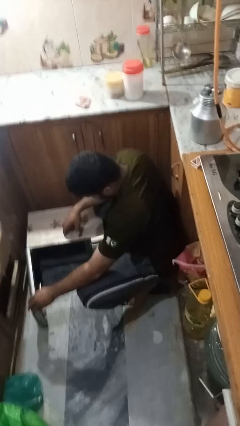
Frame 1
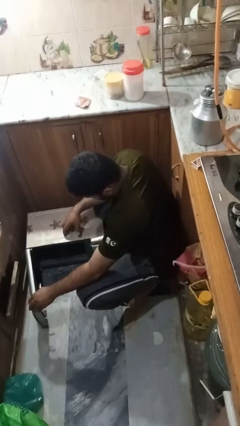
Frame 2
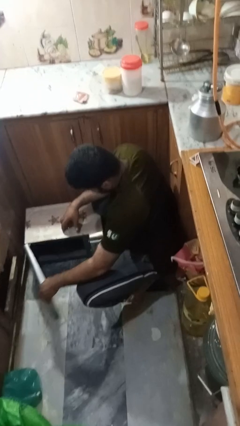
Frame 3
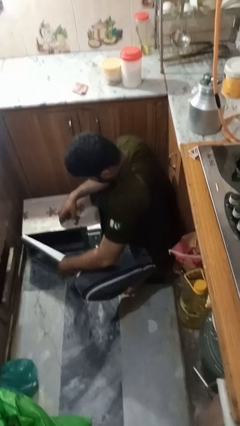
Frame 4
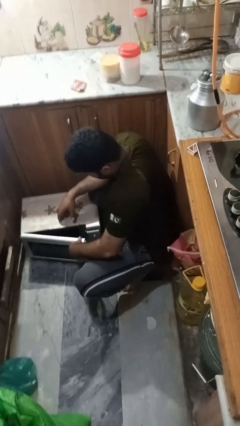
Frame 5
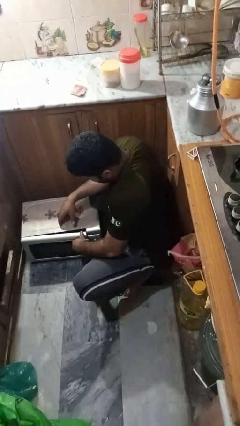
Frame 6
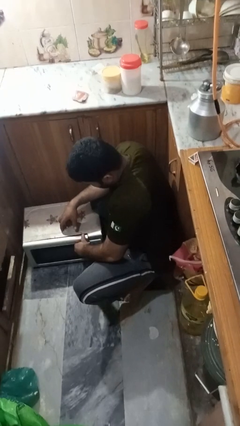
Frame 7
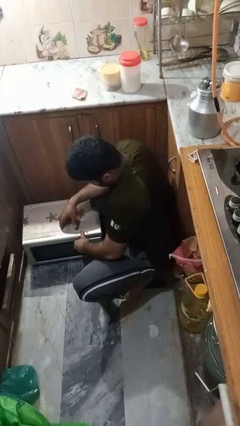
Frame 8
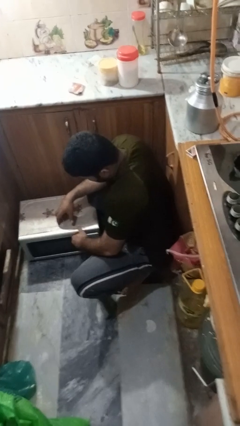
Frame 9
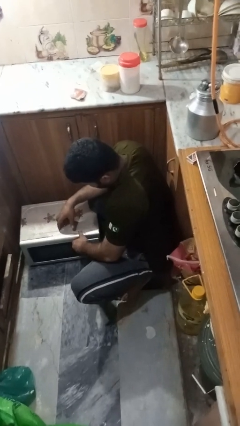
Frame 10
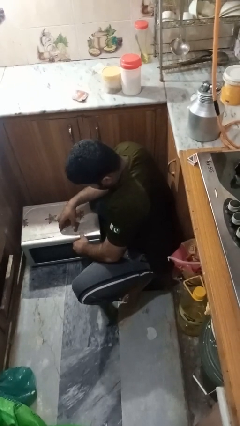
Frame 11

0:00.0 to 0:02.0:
person closes oven door

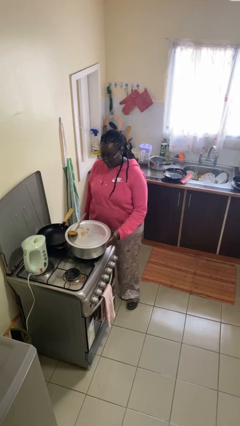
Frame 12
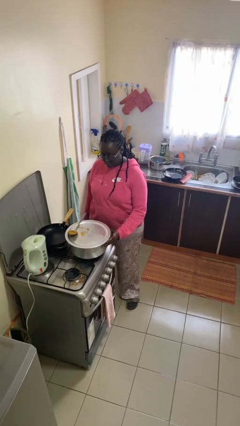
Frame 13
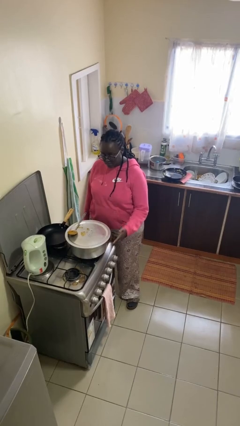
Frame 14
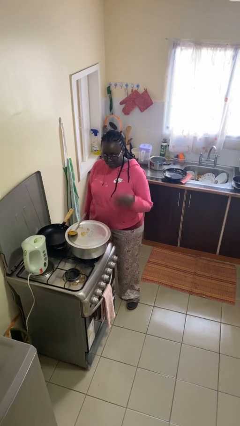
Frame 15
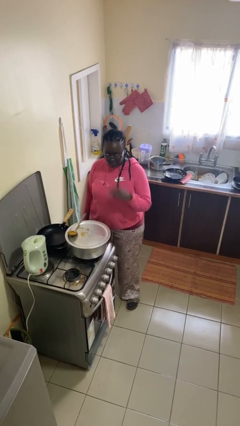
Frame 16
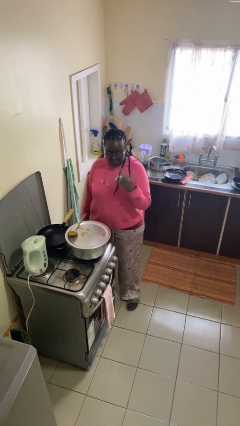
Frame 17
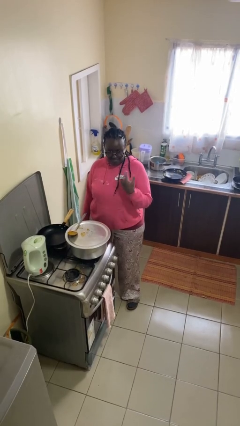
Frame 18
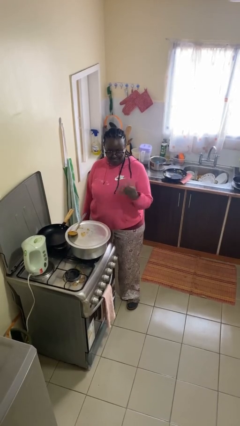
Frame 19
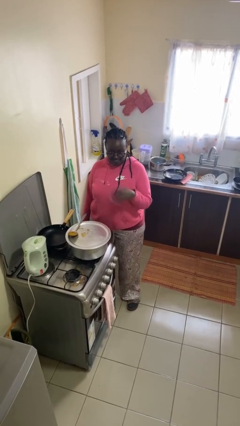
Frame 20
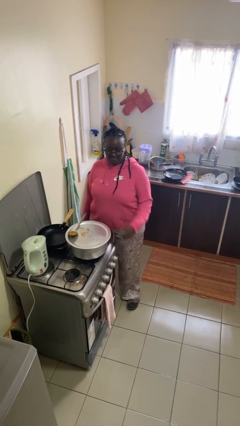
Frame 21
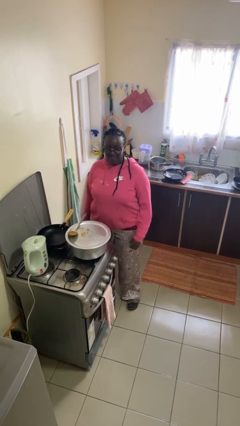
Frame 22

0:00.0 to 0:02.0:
person burns hand

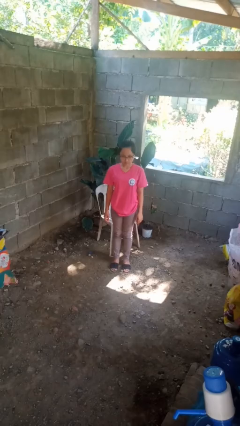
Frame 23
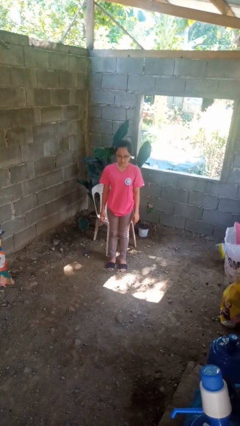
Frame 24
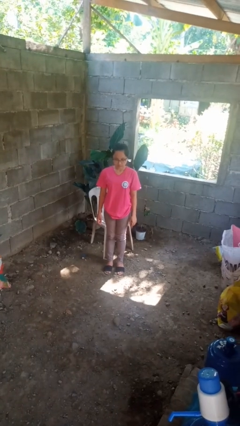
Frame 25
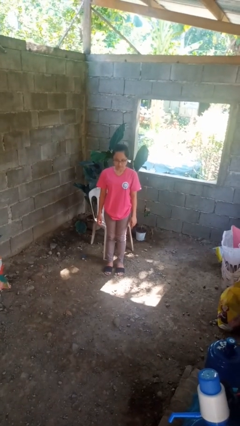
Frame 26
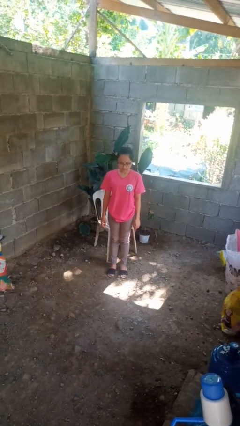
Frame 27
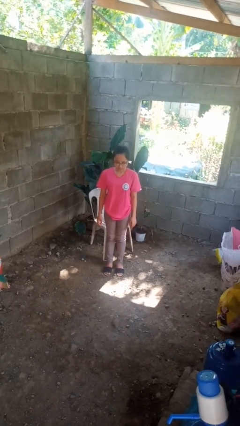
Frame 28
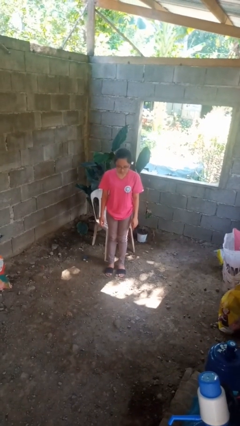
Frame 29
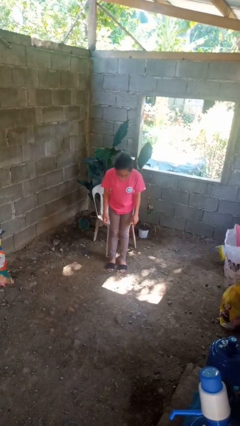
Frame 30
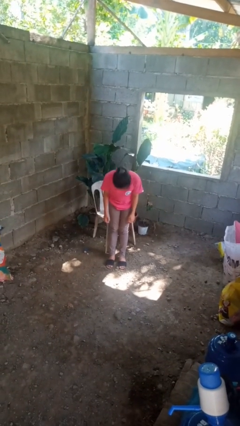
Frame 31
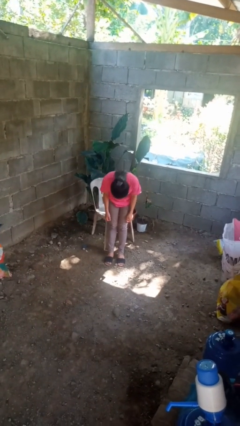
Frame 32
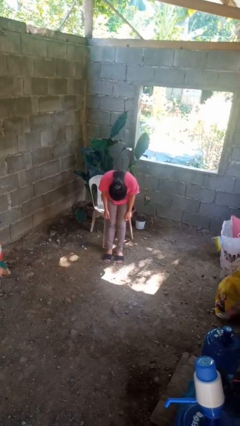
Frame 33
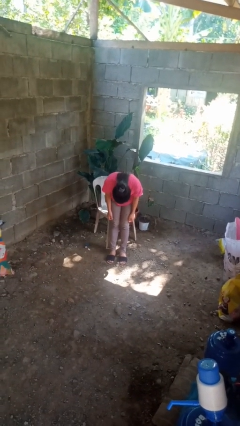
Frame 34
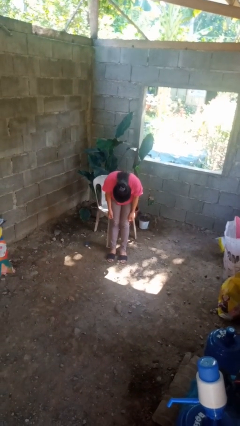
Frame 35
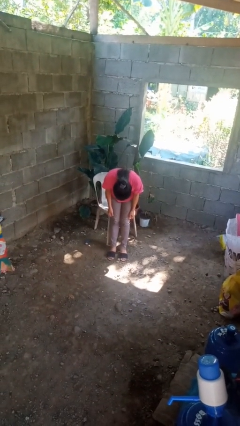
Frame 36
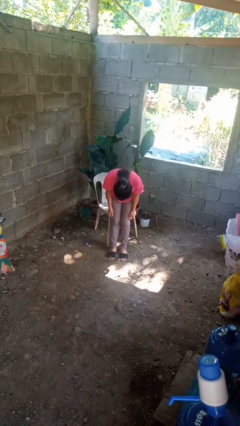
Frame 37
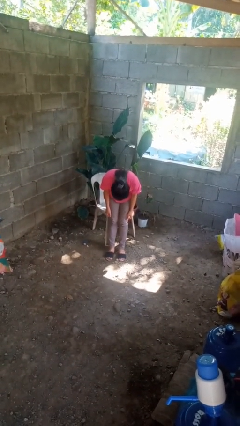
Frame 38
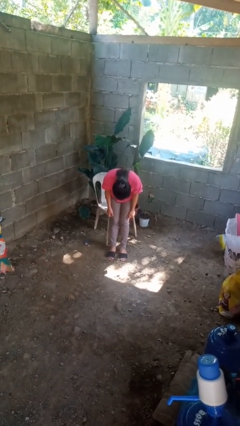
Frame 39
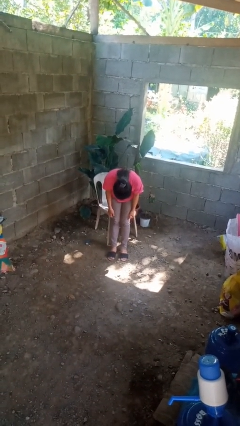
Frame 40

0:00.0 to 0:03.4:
person bows

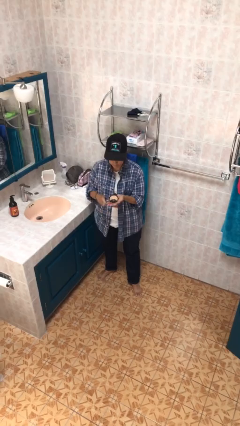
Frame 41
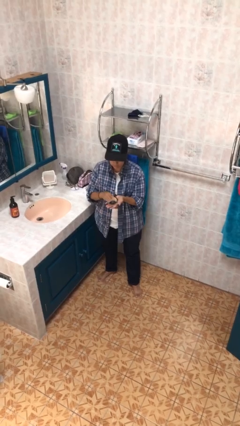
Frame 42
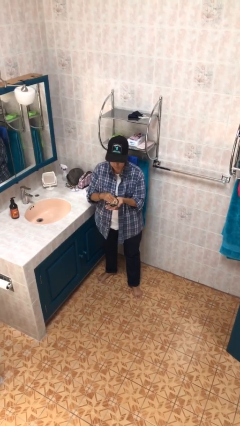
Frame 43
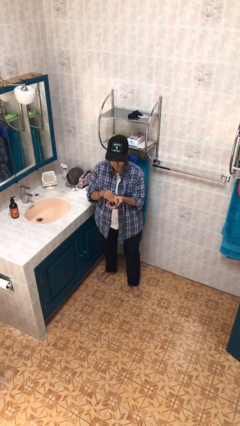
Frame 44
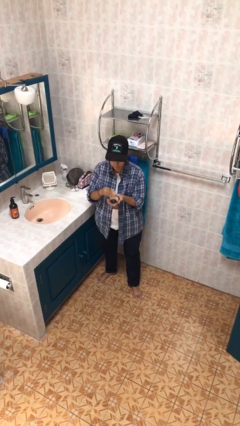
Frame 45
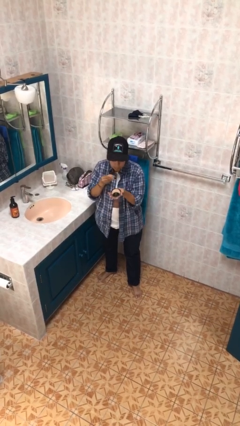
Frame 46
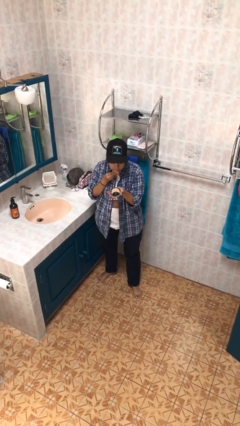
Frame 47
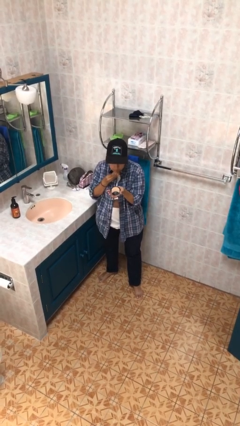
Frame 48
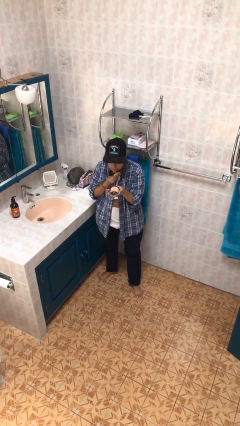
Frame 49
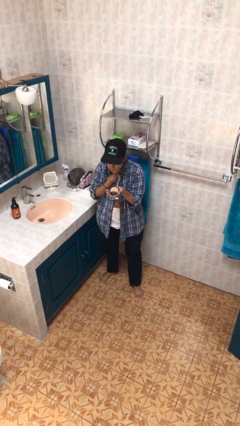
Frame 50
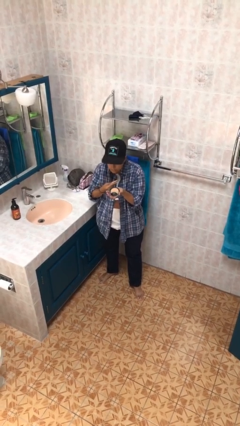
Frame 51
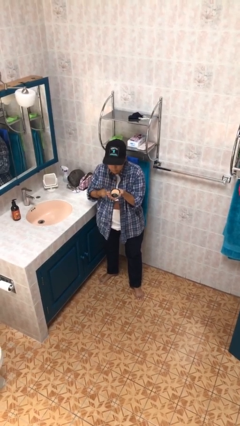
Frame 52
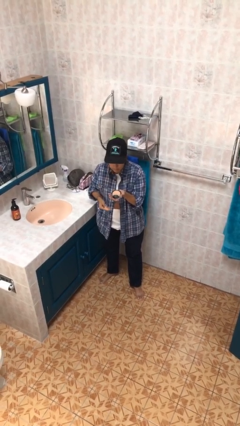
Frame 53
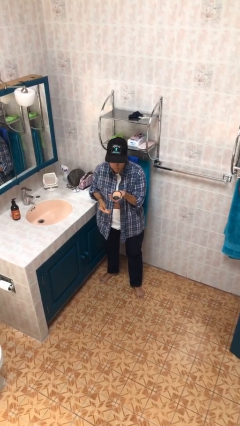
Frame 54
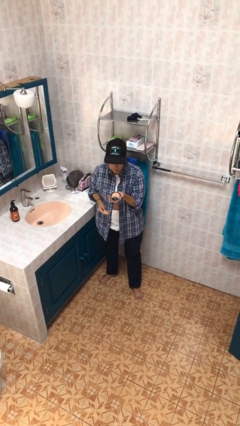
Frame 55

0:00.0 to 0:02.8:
person applies foundation makeup

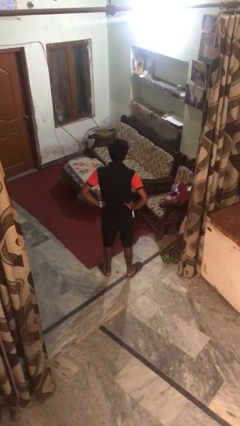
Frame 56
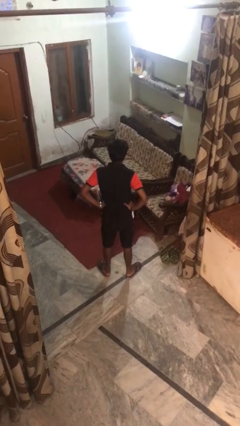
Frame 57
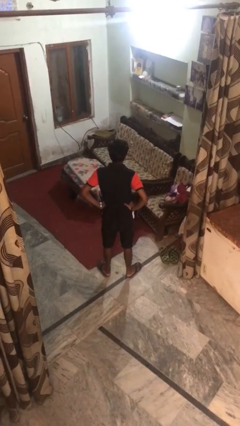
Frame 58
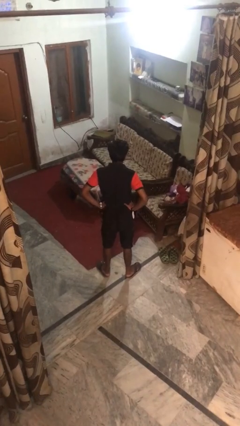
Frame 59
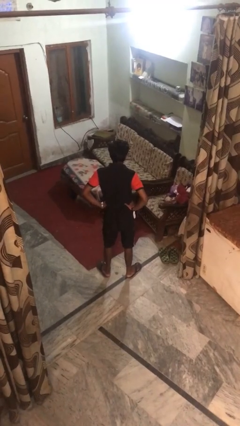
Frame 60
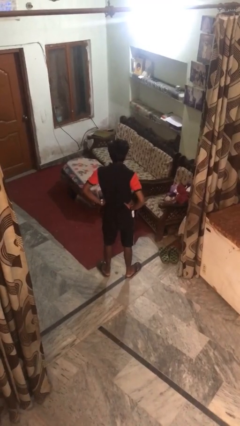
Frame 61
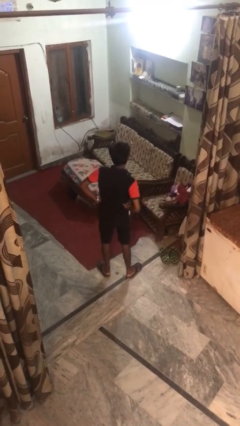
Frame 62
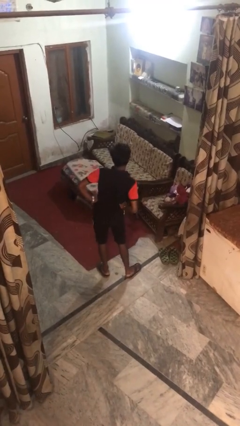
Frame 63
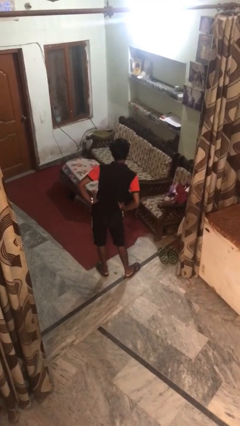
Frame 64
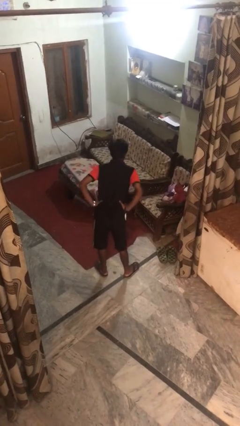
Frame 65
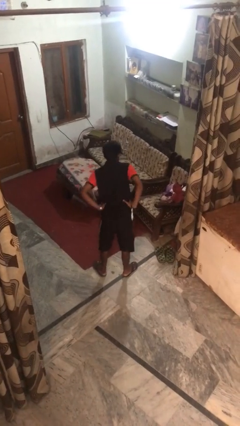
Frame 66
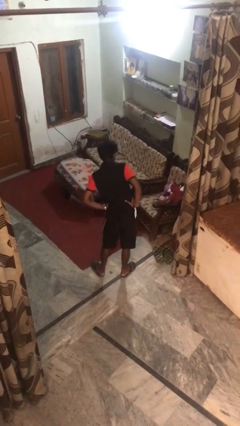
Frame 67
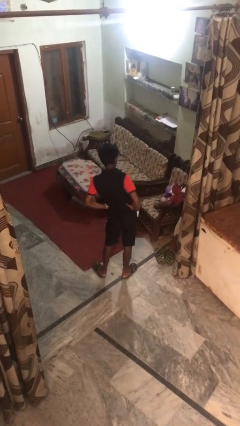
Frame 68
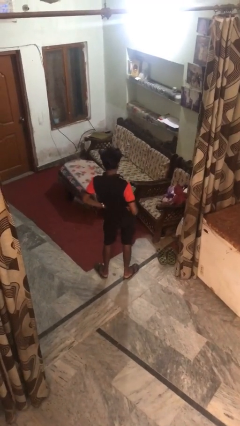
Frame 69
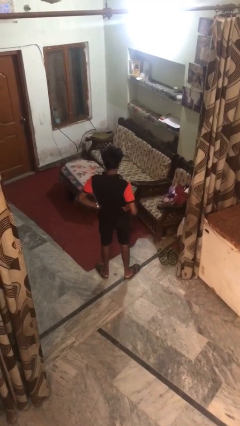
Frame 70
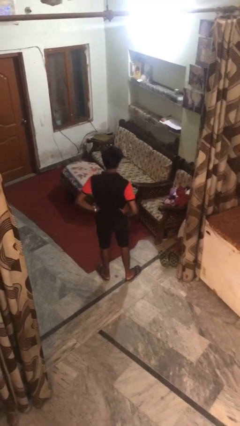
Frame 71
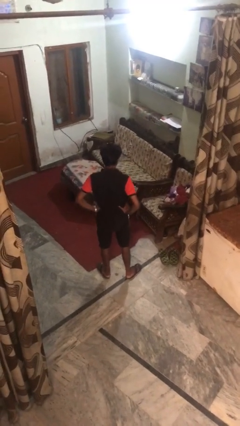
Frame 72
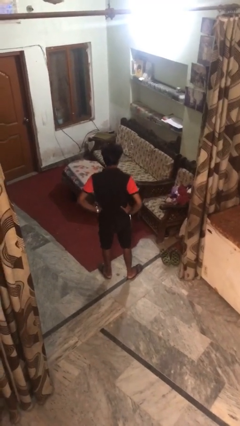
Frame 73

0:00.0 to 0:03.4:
person wiggles hips

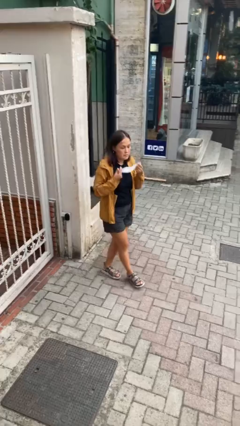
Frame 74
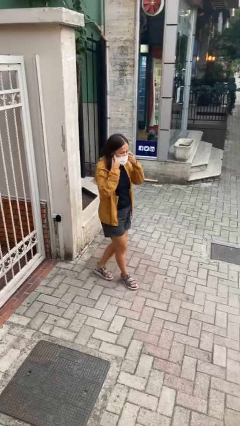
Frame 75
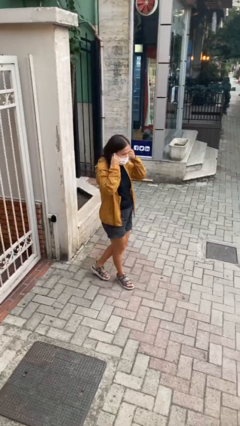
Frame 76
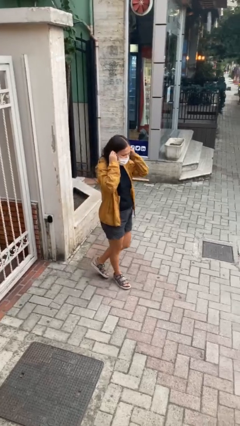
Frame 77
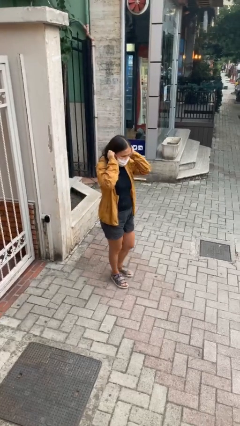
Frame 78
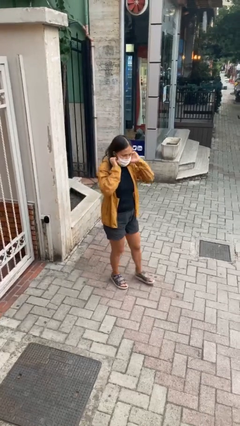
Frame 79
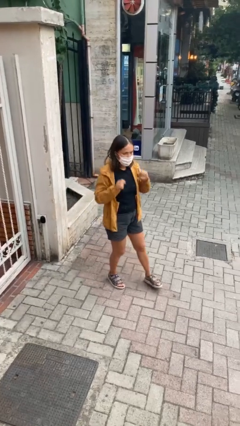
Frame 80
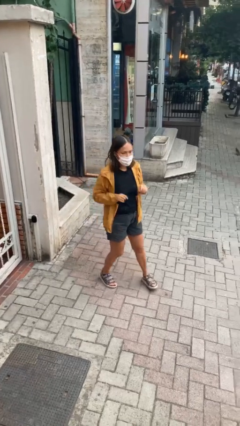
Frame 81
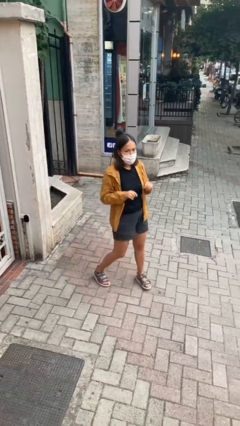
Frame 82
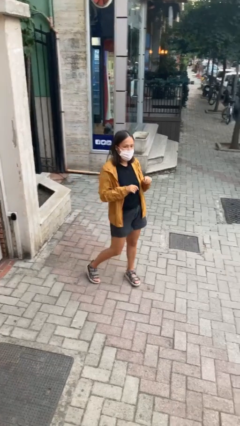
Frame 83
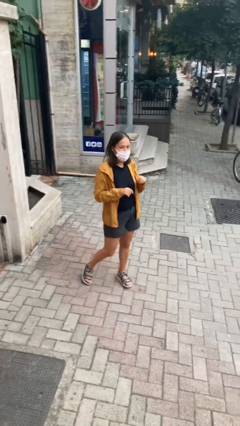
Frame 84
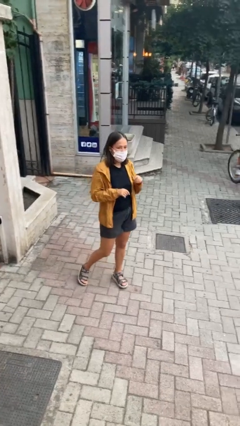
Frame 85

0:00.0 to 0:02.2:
person puts on facemask

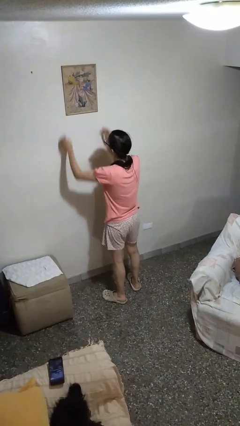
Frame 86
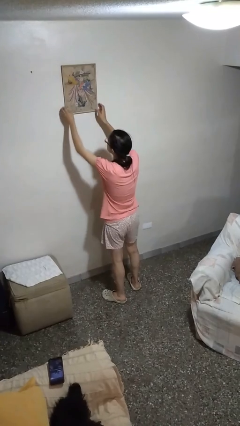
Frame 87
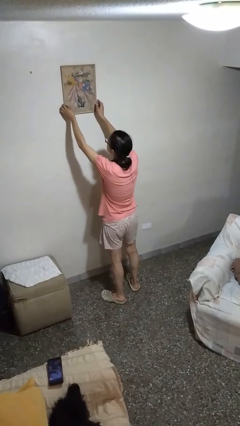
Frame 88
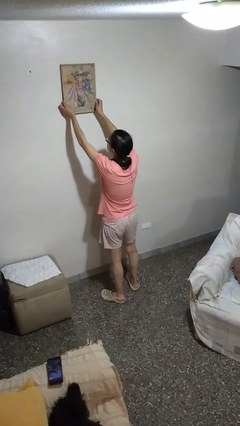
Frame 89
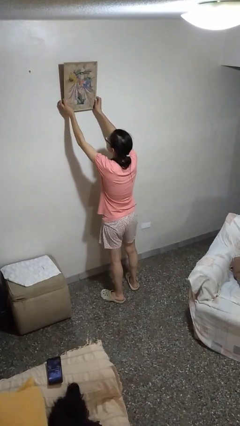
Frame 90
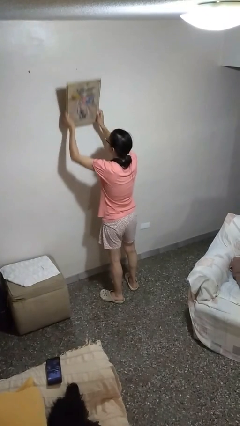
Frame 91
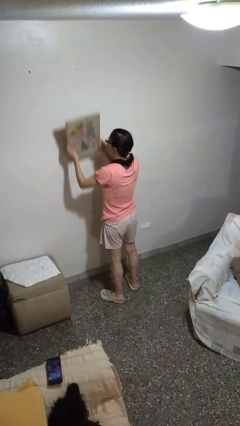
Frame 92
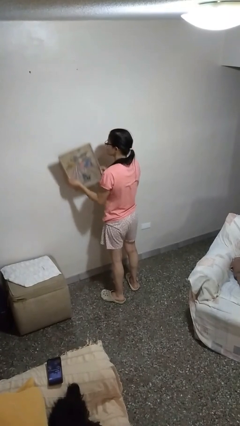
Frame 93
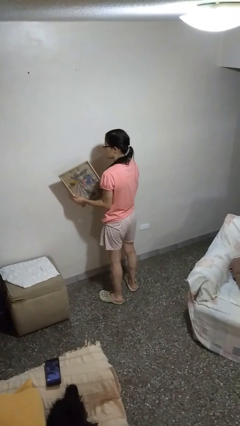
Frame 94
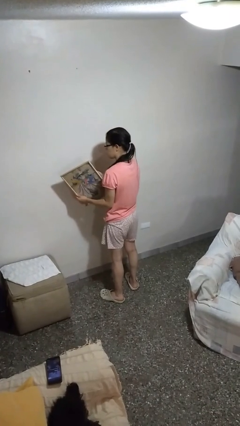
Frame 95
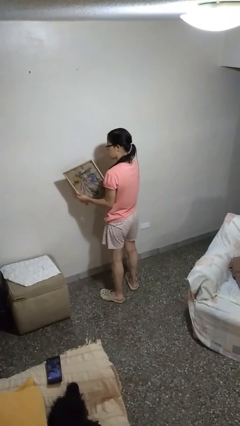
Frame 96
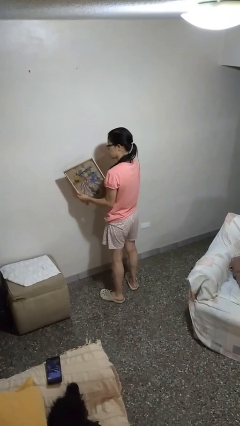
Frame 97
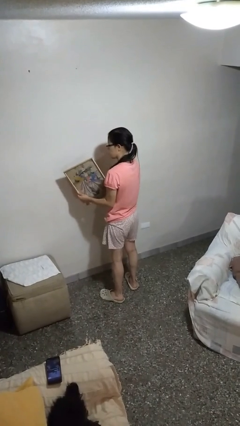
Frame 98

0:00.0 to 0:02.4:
person takes down picture frame
